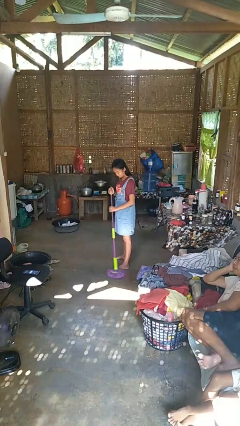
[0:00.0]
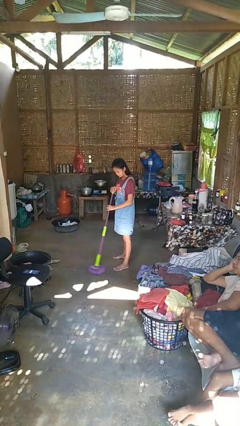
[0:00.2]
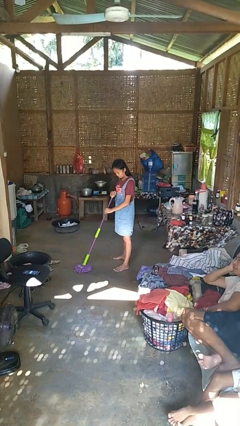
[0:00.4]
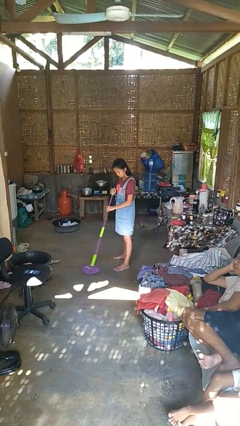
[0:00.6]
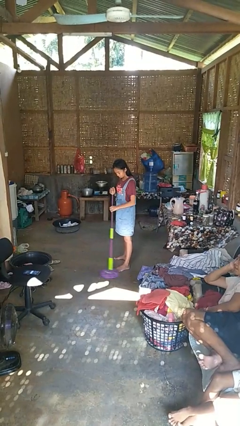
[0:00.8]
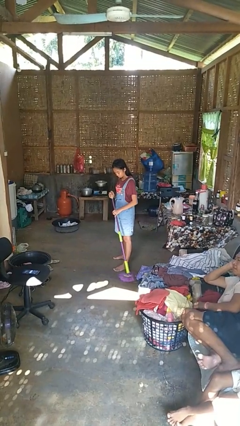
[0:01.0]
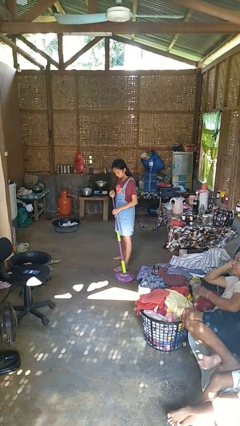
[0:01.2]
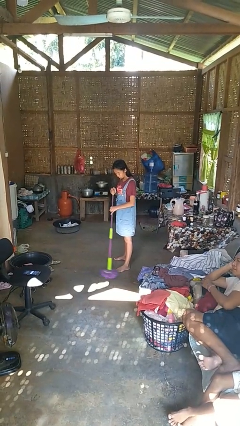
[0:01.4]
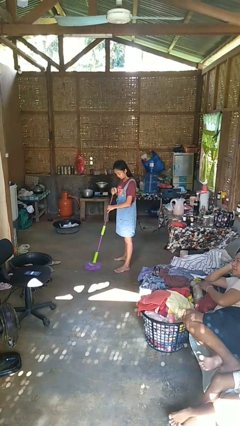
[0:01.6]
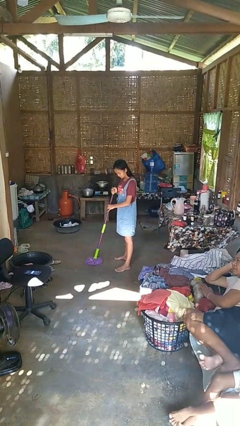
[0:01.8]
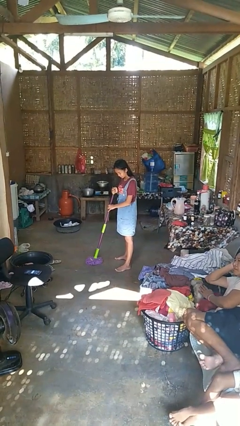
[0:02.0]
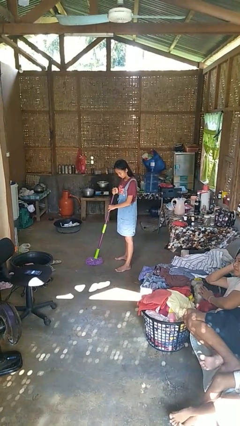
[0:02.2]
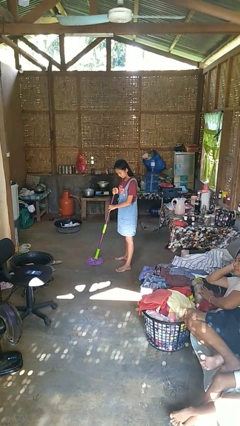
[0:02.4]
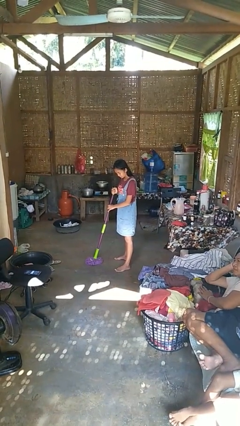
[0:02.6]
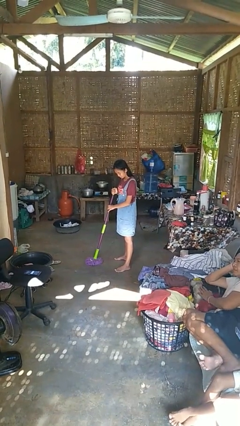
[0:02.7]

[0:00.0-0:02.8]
person mops

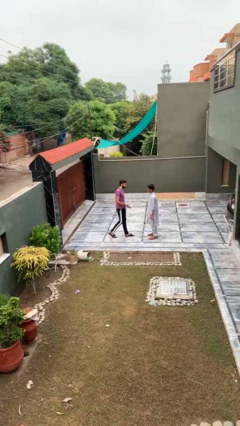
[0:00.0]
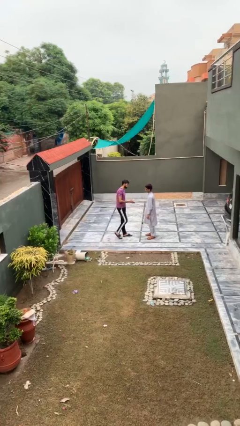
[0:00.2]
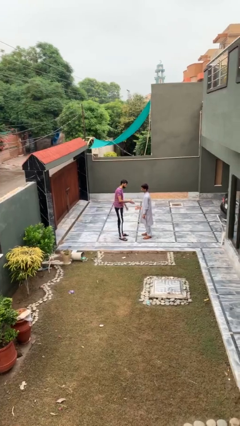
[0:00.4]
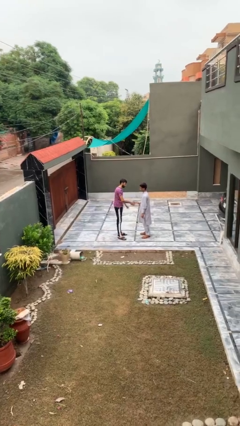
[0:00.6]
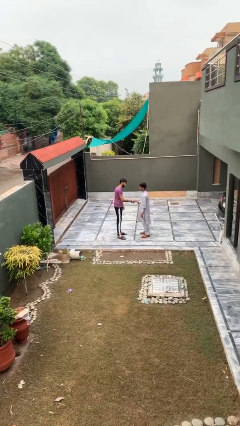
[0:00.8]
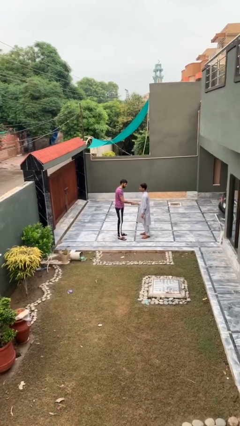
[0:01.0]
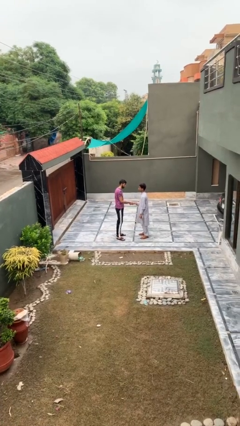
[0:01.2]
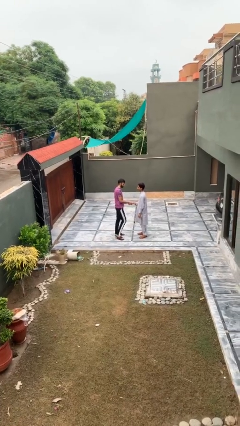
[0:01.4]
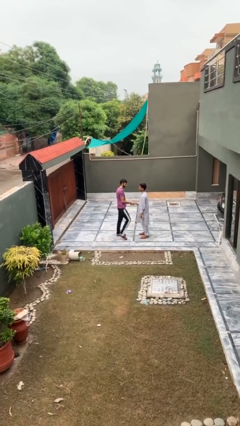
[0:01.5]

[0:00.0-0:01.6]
person shakes hand

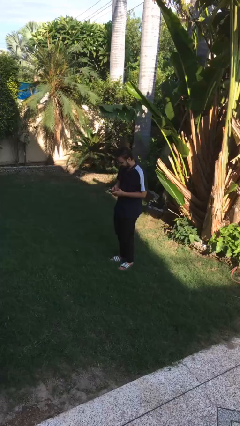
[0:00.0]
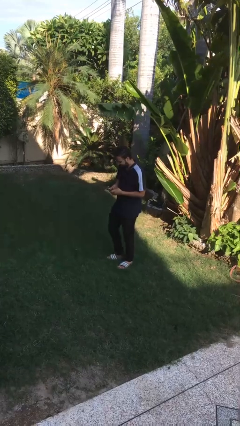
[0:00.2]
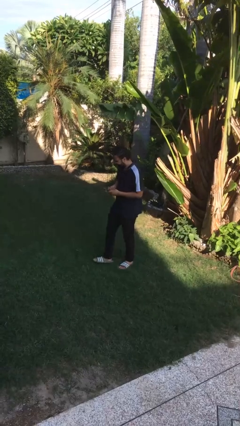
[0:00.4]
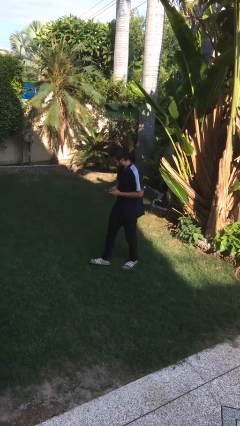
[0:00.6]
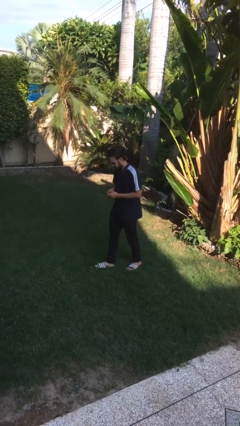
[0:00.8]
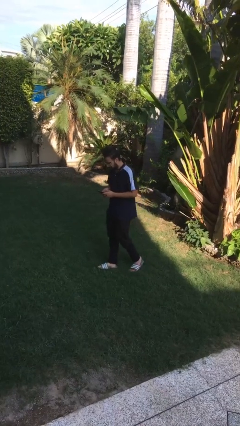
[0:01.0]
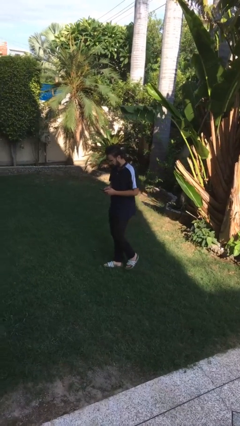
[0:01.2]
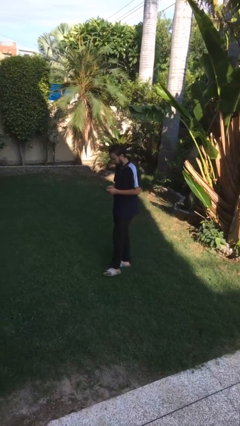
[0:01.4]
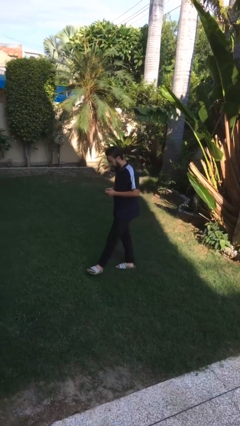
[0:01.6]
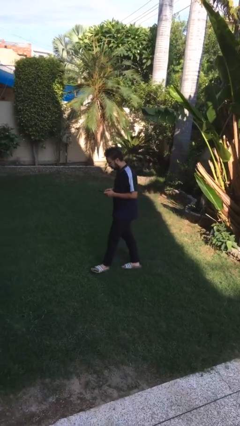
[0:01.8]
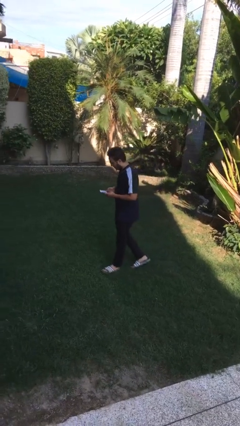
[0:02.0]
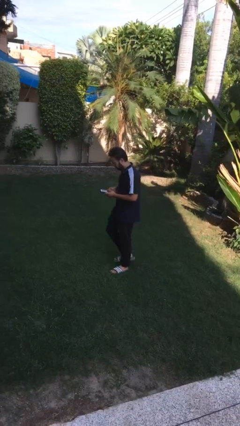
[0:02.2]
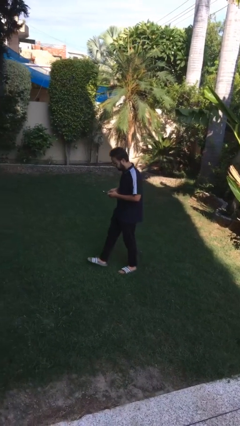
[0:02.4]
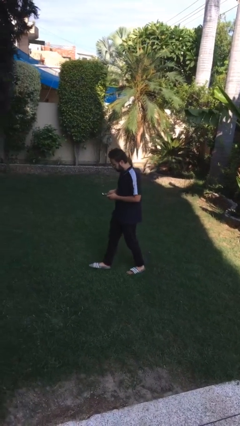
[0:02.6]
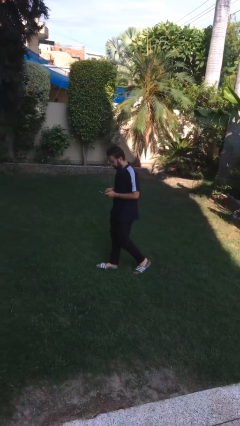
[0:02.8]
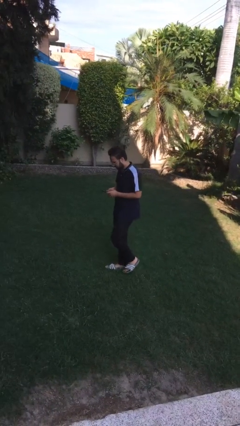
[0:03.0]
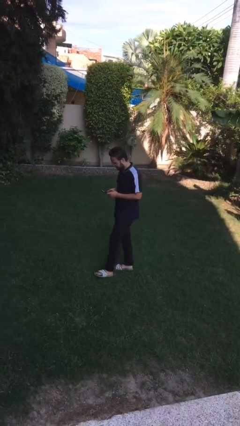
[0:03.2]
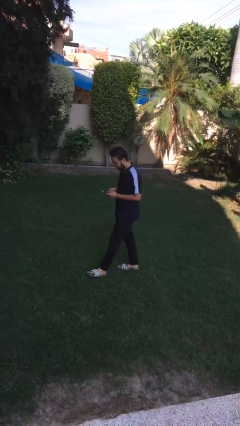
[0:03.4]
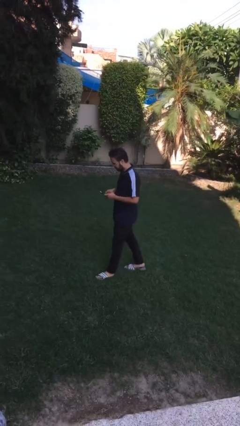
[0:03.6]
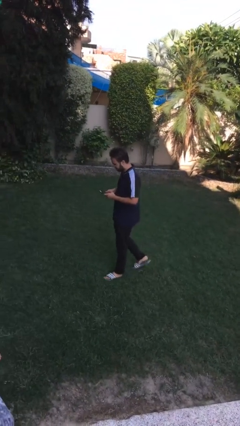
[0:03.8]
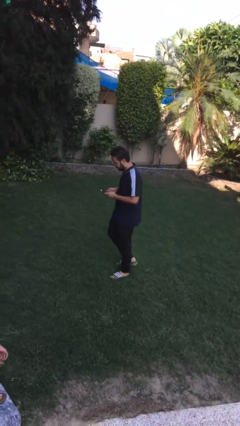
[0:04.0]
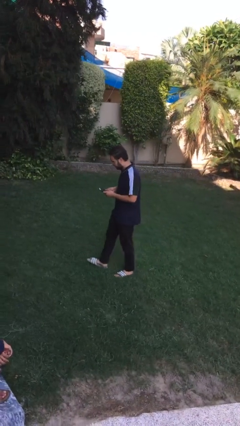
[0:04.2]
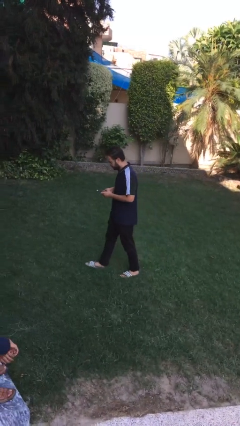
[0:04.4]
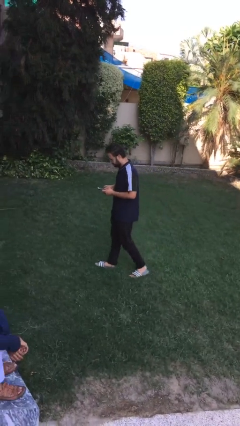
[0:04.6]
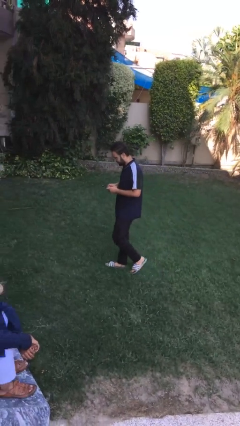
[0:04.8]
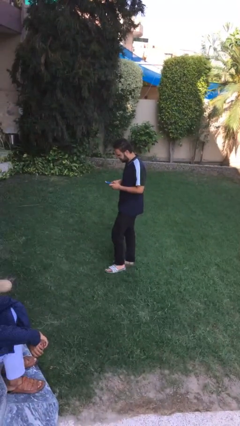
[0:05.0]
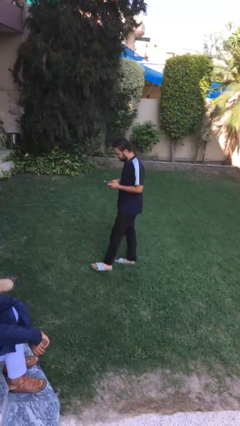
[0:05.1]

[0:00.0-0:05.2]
person texts on phone

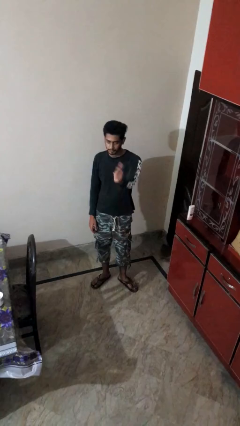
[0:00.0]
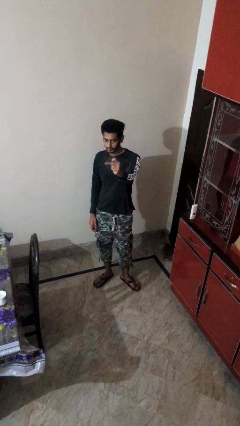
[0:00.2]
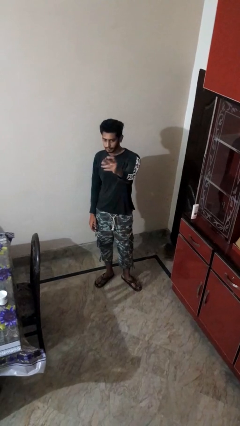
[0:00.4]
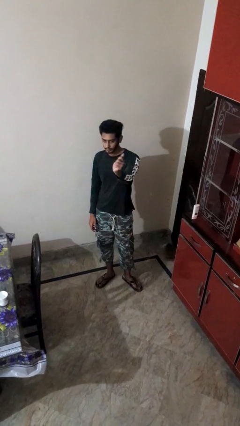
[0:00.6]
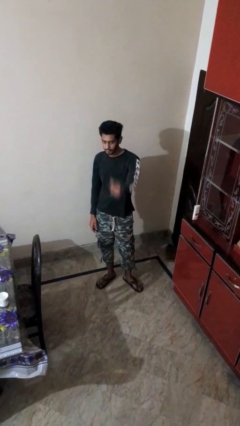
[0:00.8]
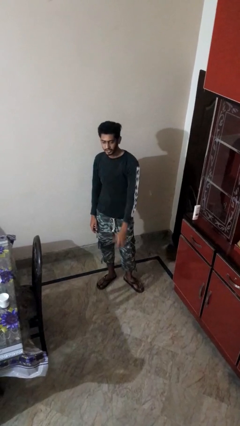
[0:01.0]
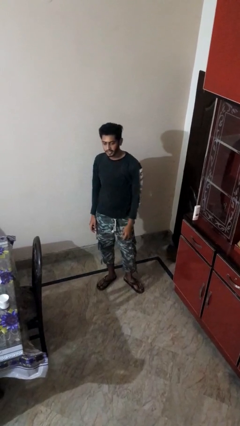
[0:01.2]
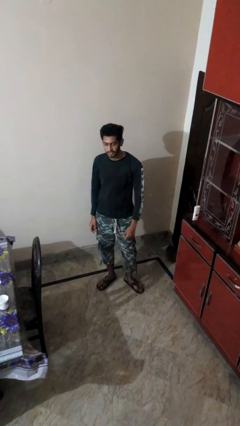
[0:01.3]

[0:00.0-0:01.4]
person snaps fingers

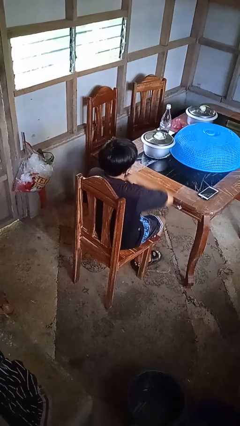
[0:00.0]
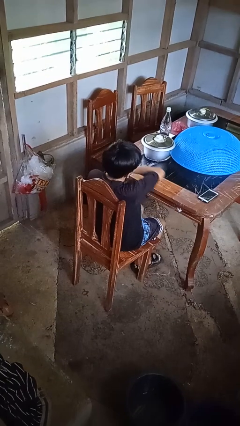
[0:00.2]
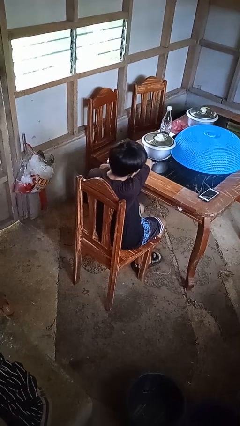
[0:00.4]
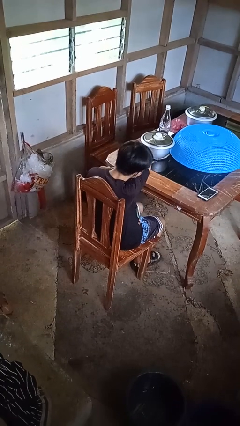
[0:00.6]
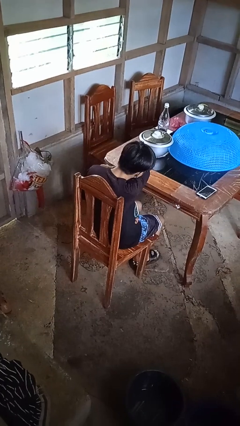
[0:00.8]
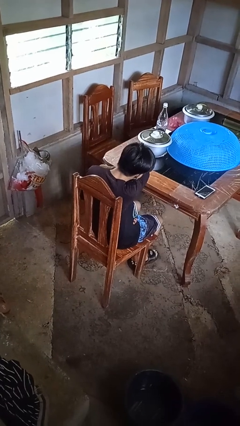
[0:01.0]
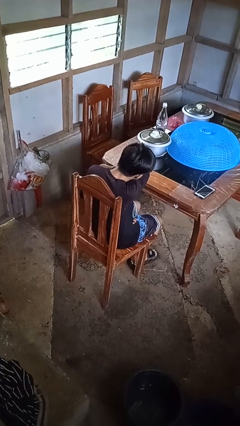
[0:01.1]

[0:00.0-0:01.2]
person sneezes into arm

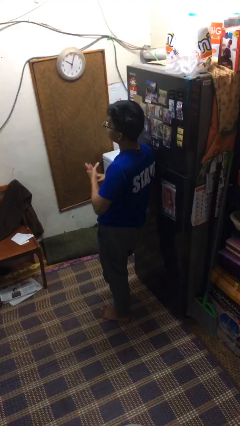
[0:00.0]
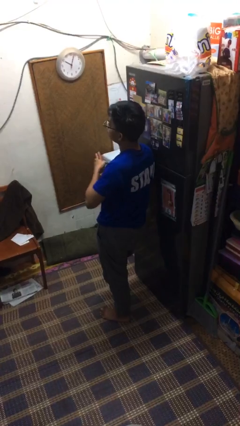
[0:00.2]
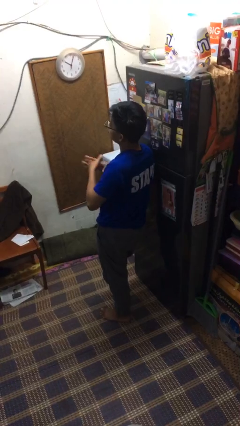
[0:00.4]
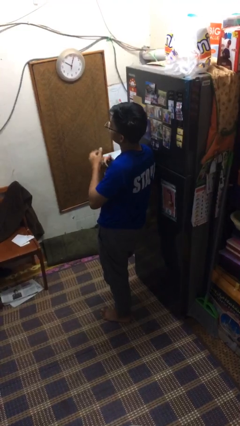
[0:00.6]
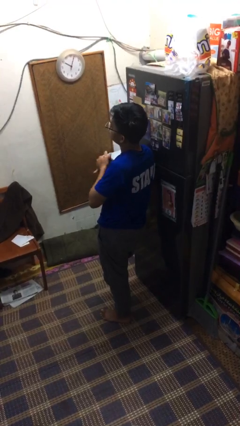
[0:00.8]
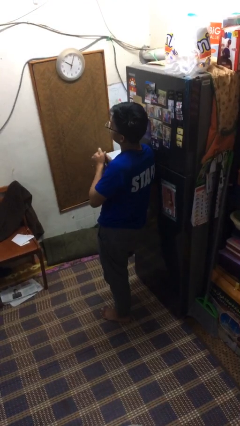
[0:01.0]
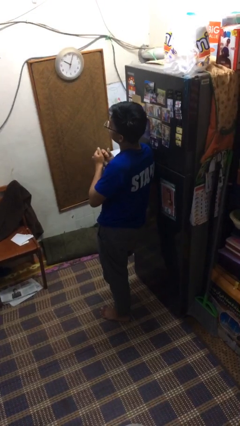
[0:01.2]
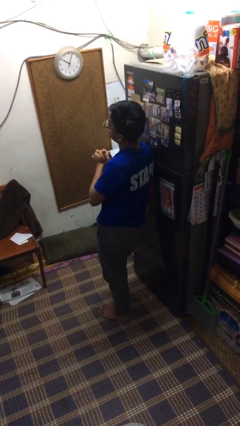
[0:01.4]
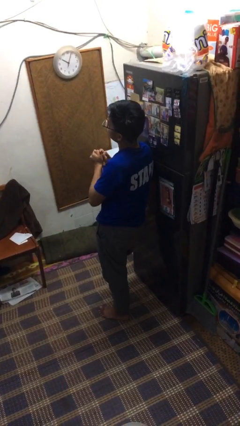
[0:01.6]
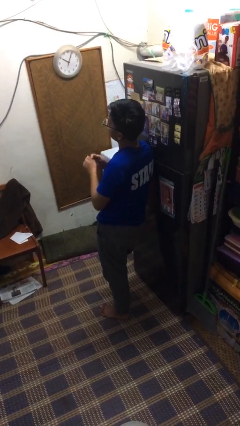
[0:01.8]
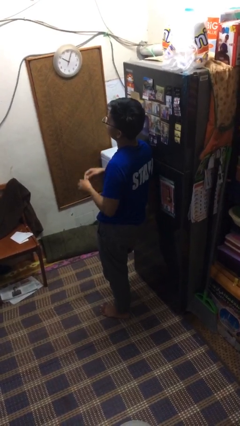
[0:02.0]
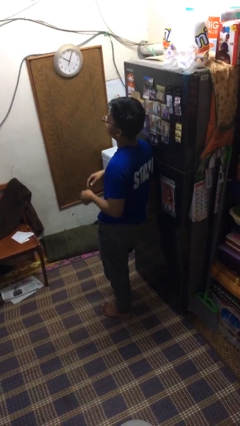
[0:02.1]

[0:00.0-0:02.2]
person cracks knuckles

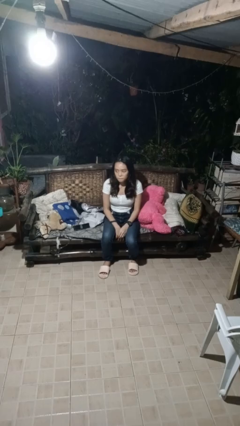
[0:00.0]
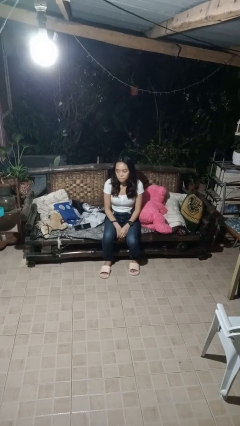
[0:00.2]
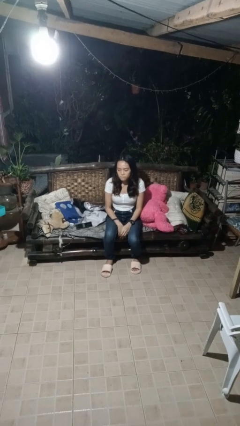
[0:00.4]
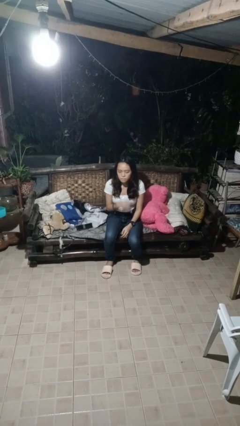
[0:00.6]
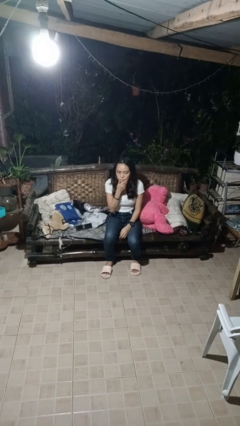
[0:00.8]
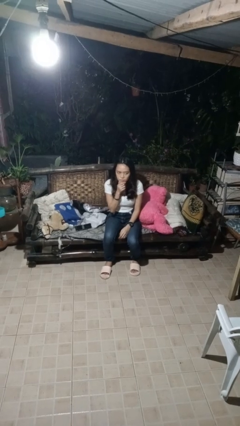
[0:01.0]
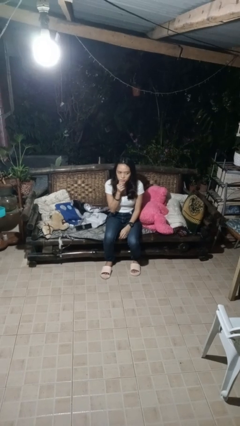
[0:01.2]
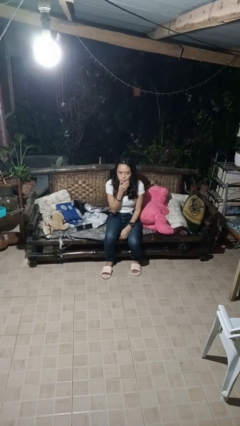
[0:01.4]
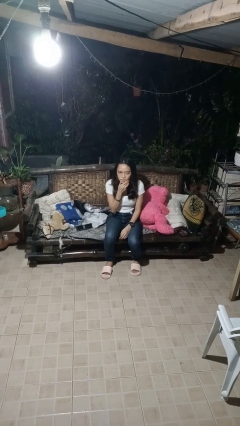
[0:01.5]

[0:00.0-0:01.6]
person strokes chin

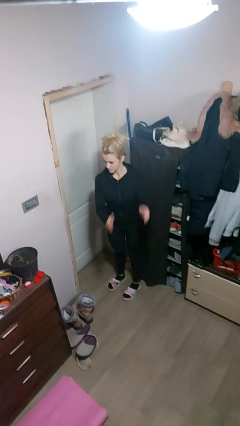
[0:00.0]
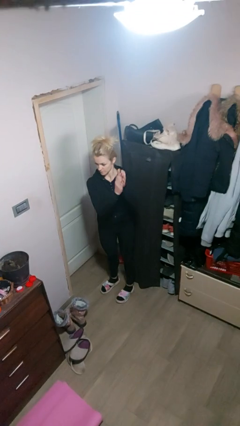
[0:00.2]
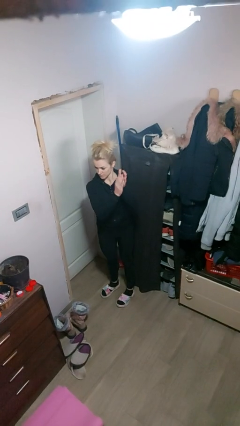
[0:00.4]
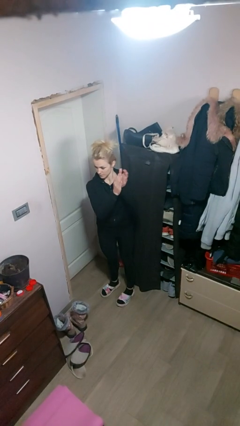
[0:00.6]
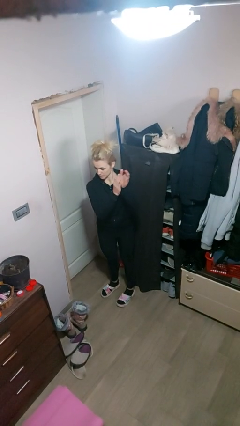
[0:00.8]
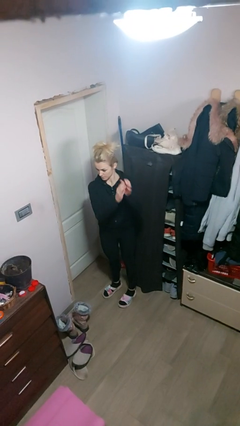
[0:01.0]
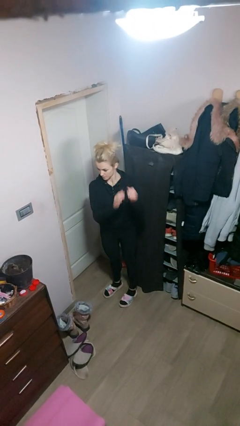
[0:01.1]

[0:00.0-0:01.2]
person claps hands
